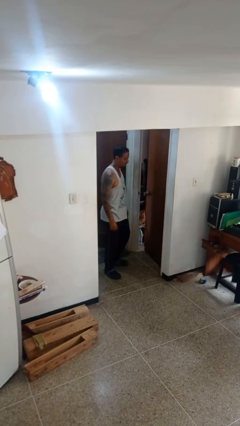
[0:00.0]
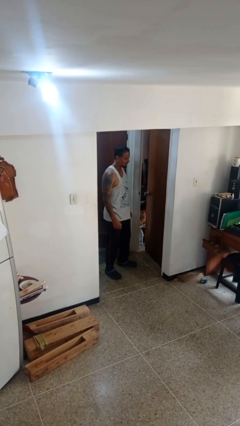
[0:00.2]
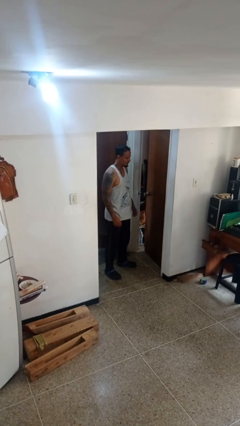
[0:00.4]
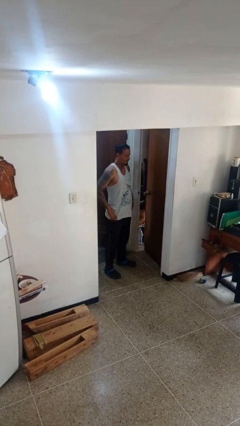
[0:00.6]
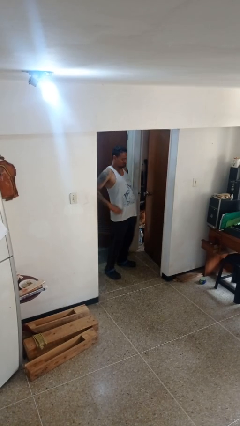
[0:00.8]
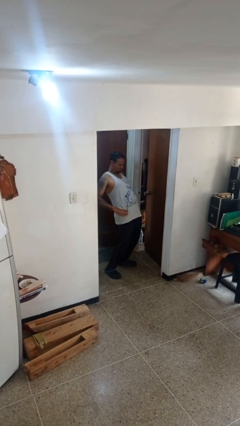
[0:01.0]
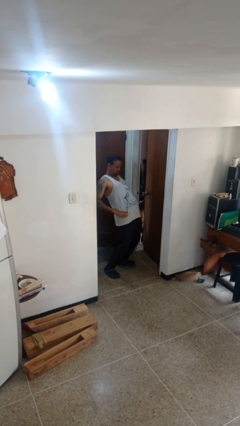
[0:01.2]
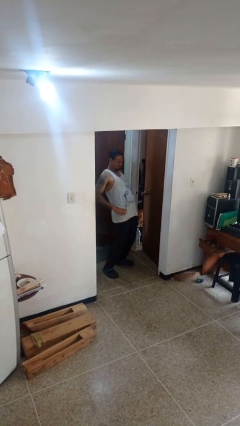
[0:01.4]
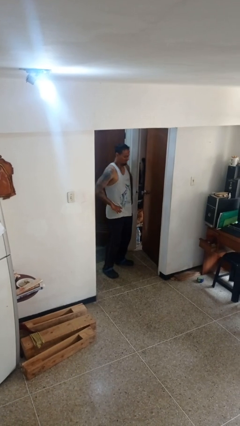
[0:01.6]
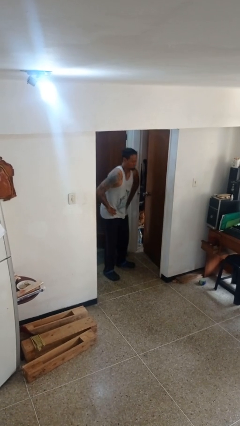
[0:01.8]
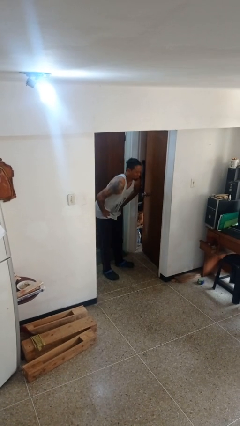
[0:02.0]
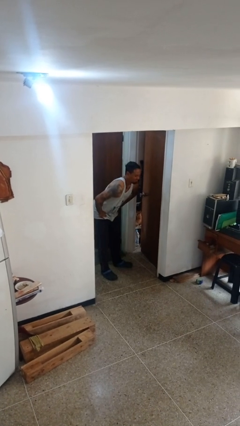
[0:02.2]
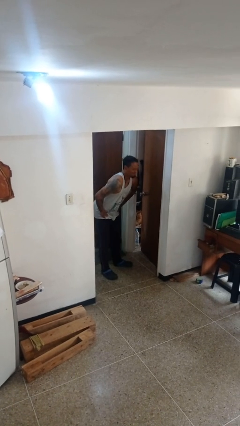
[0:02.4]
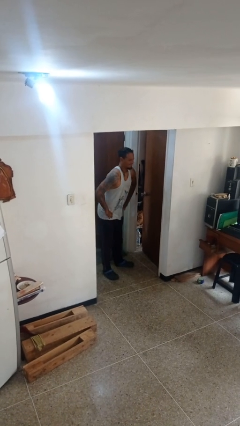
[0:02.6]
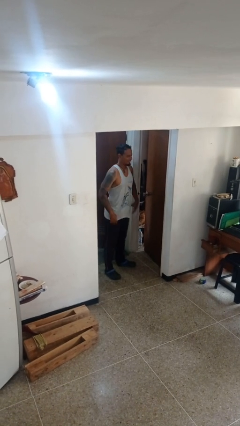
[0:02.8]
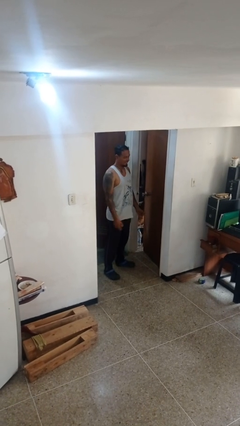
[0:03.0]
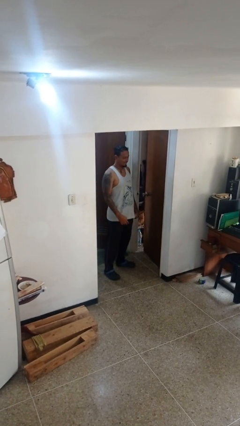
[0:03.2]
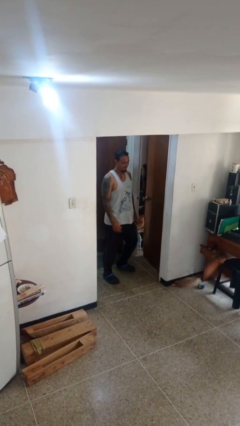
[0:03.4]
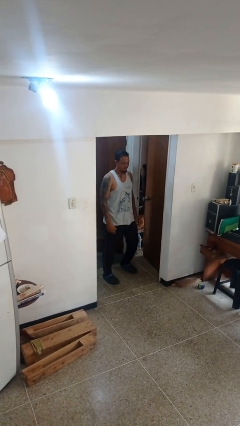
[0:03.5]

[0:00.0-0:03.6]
person wiggles hips

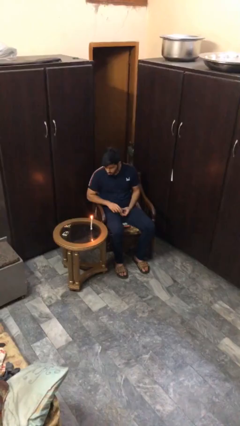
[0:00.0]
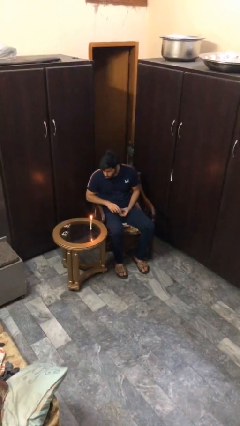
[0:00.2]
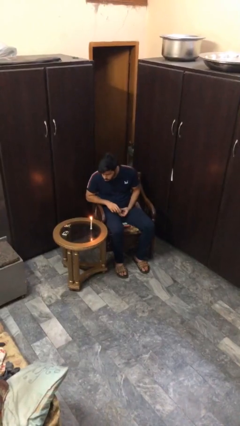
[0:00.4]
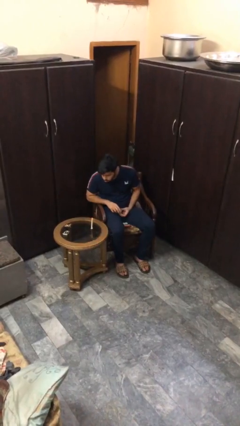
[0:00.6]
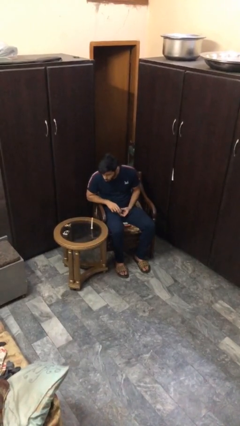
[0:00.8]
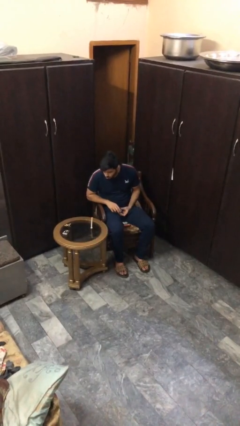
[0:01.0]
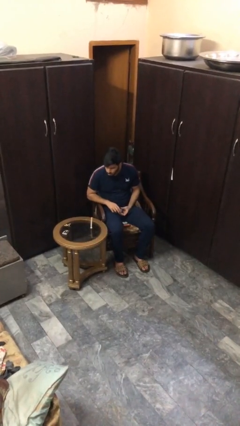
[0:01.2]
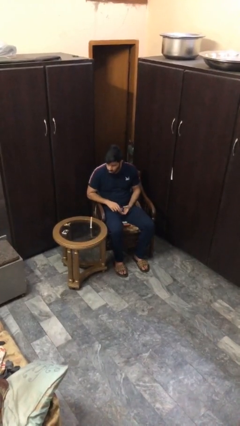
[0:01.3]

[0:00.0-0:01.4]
person extinguishes candle

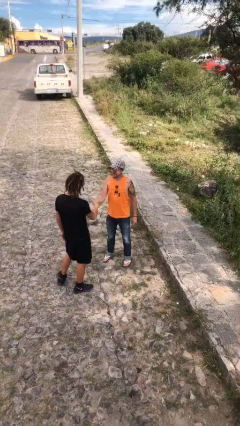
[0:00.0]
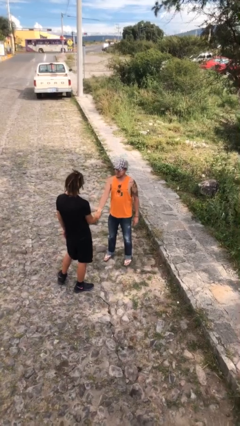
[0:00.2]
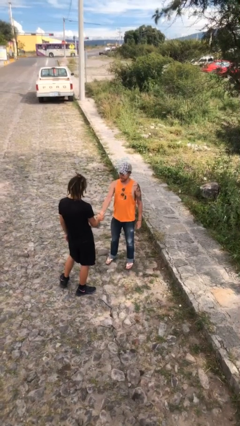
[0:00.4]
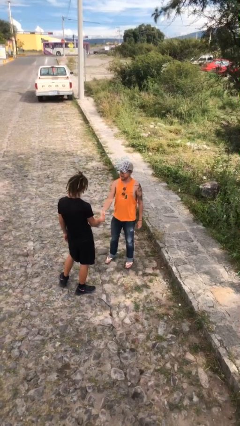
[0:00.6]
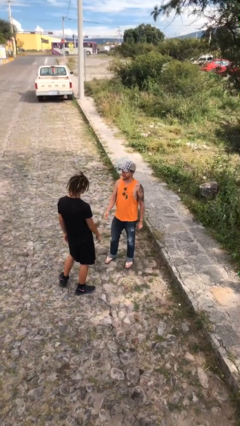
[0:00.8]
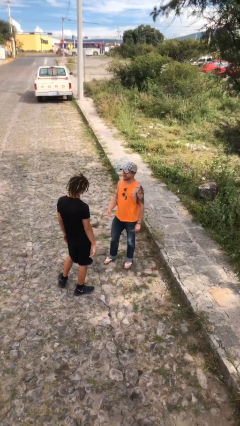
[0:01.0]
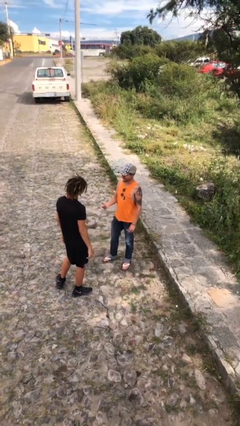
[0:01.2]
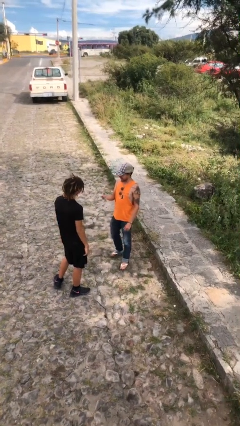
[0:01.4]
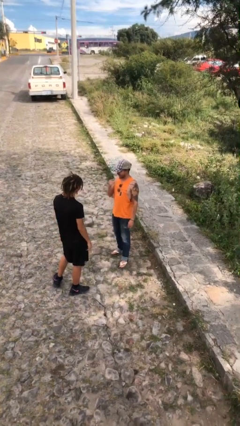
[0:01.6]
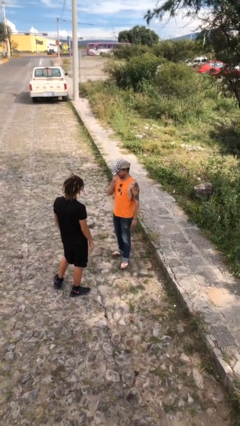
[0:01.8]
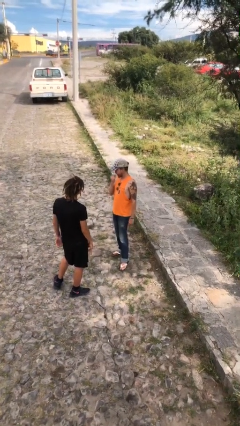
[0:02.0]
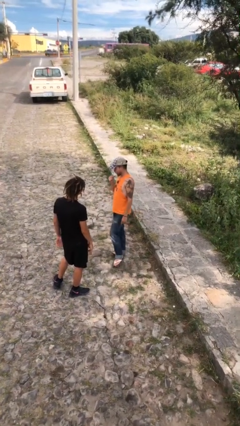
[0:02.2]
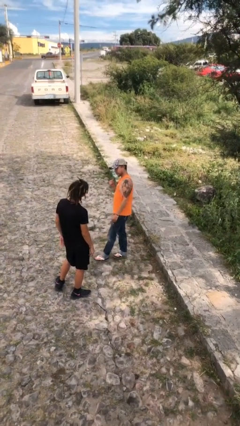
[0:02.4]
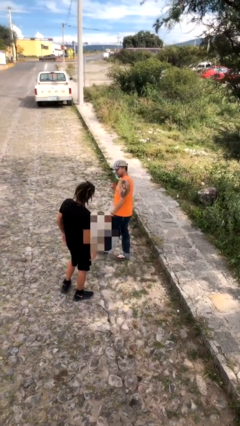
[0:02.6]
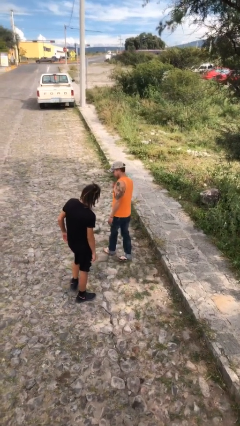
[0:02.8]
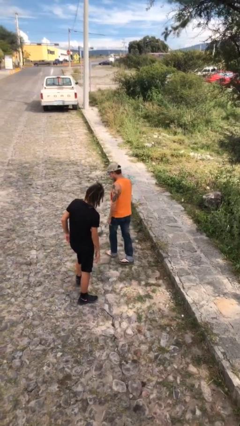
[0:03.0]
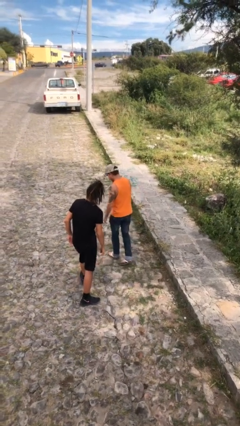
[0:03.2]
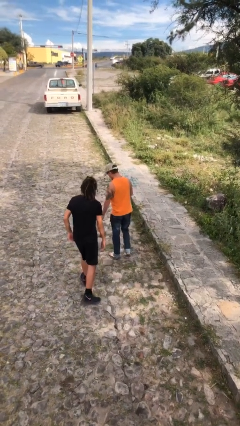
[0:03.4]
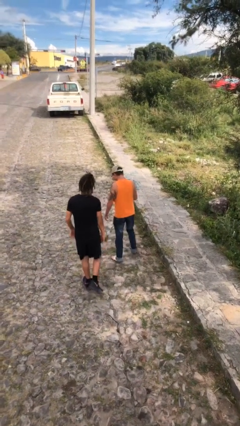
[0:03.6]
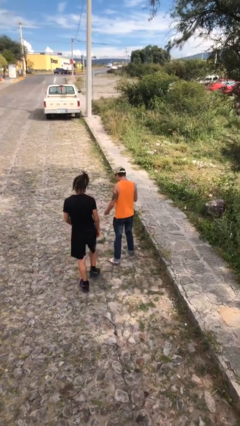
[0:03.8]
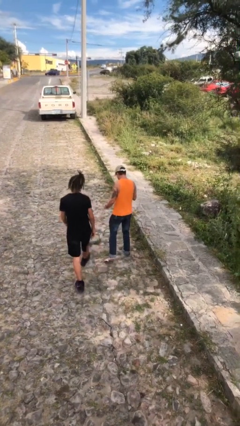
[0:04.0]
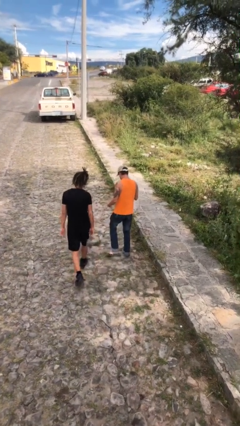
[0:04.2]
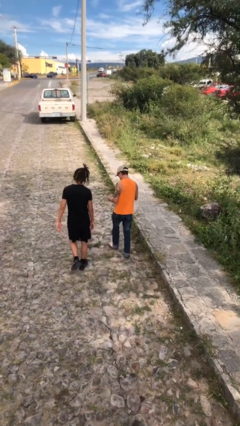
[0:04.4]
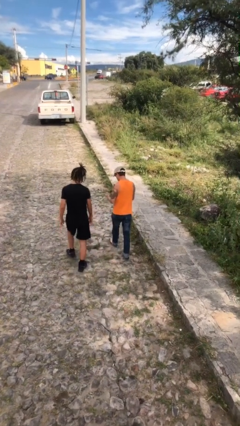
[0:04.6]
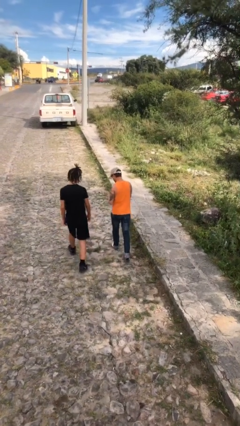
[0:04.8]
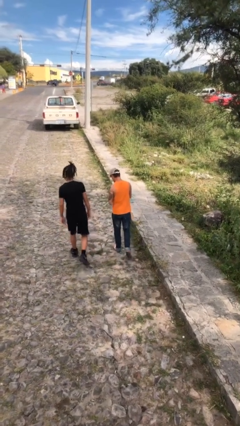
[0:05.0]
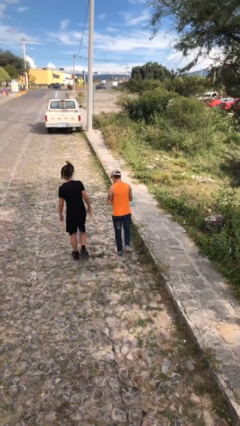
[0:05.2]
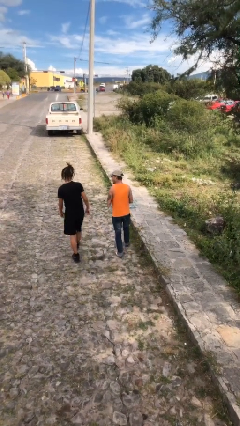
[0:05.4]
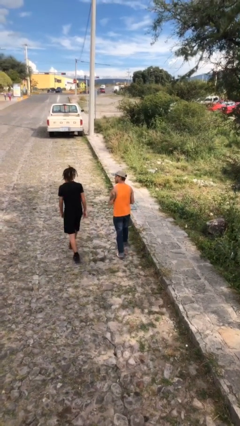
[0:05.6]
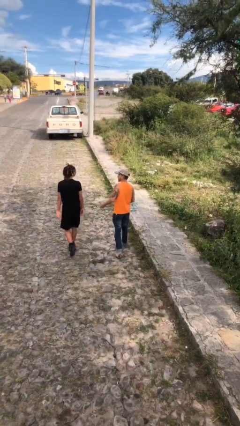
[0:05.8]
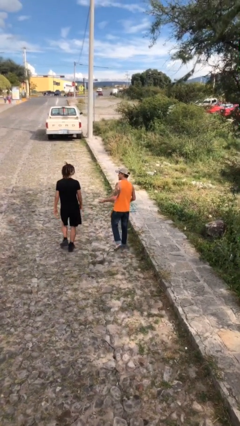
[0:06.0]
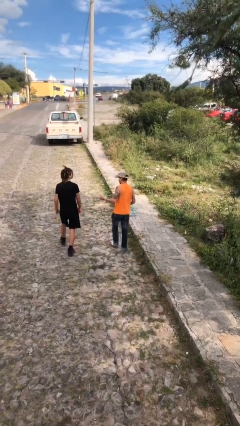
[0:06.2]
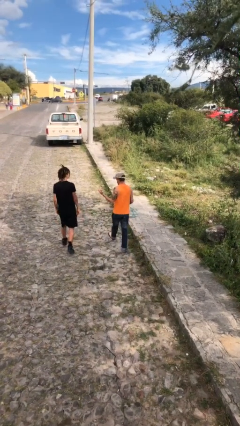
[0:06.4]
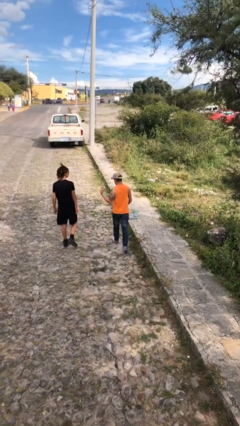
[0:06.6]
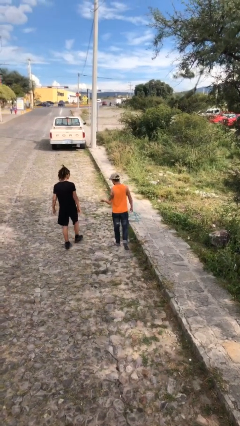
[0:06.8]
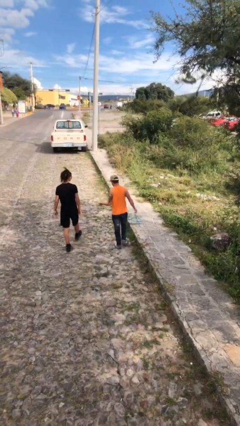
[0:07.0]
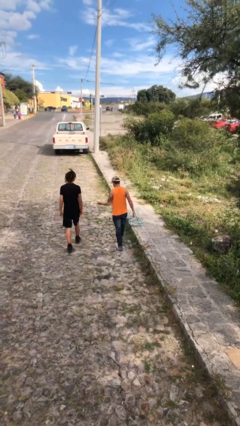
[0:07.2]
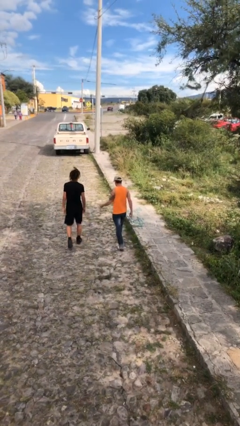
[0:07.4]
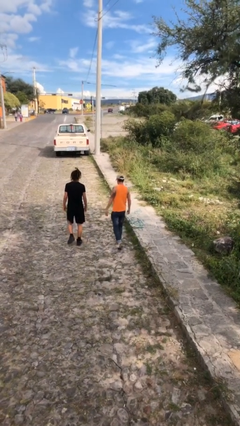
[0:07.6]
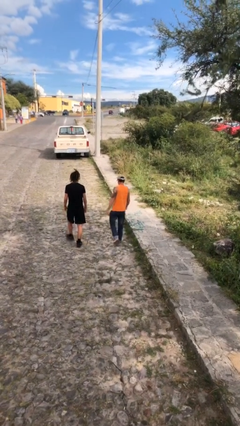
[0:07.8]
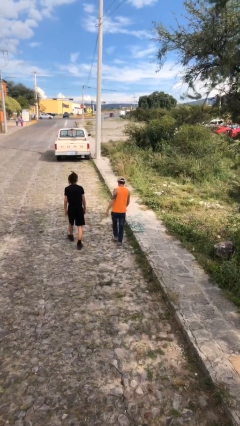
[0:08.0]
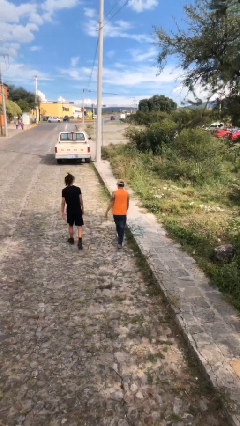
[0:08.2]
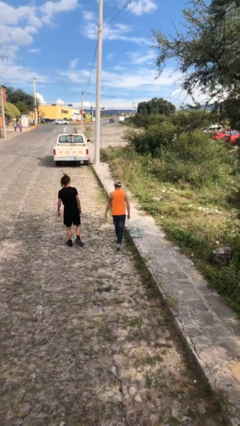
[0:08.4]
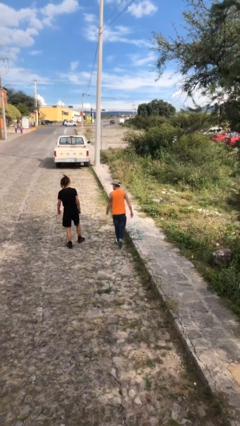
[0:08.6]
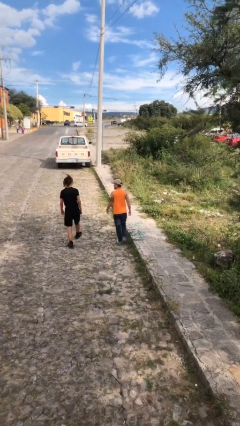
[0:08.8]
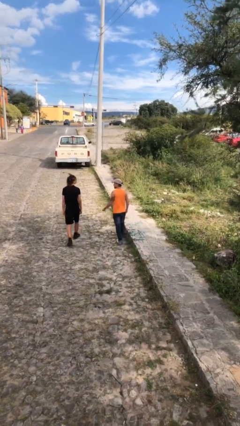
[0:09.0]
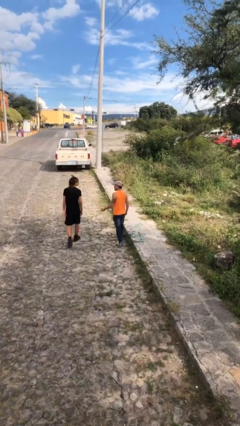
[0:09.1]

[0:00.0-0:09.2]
person talks to person

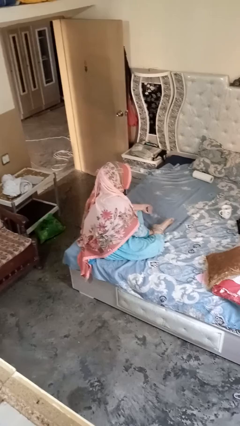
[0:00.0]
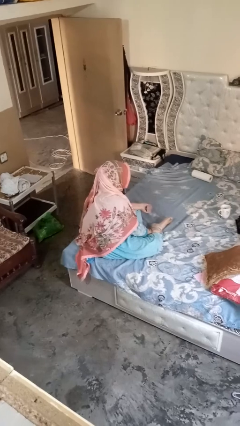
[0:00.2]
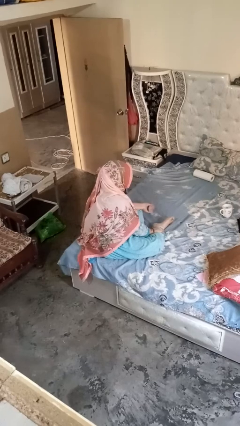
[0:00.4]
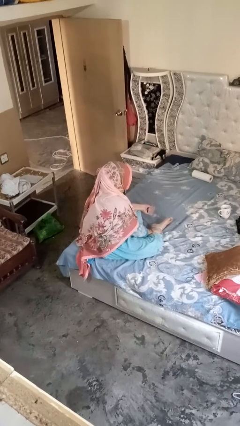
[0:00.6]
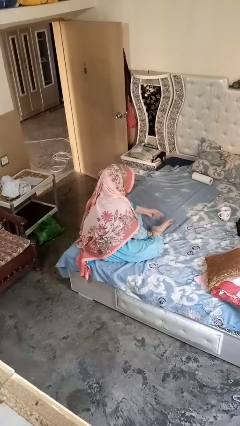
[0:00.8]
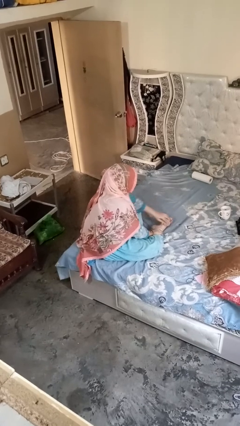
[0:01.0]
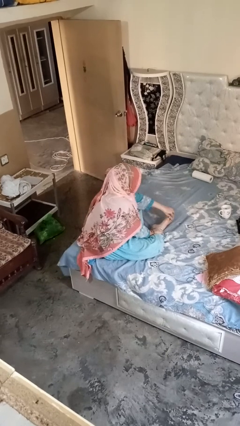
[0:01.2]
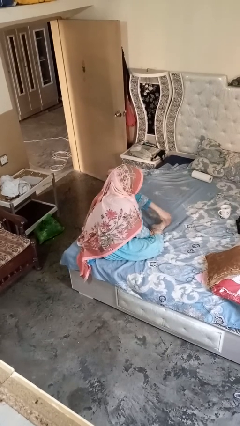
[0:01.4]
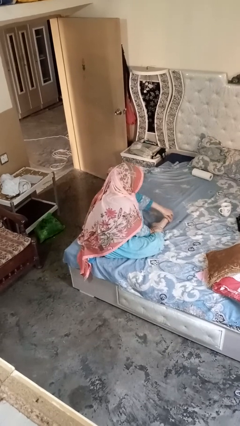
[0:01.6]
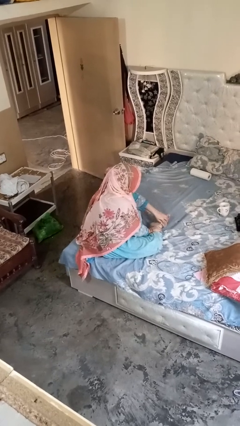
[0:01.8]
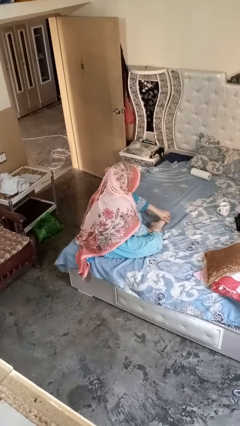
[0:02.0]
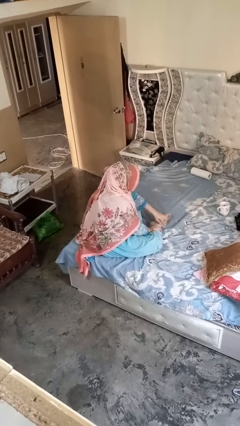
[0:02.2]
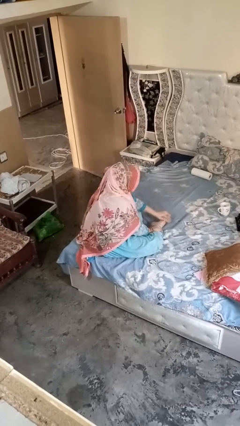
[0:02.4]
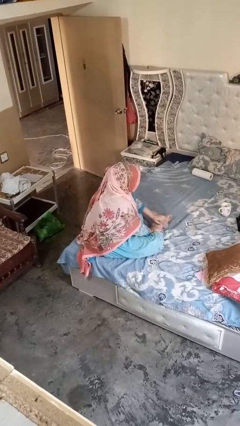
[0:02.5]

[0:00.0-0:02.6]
person rubs foot

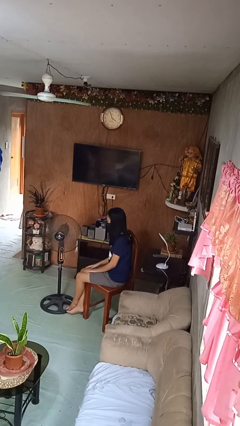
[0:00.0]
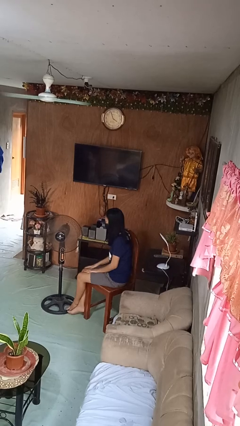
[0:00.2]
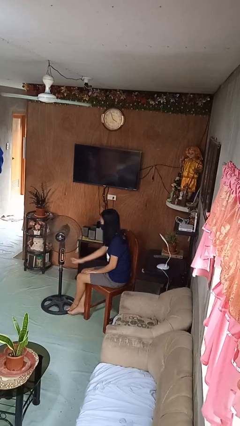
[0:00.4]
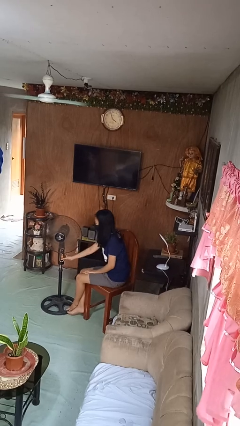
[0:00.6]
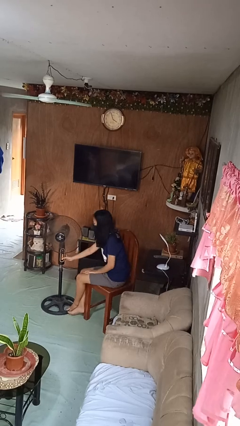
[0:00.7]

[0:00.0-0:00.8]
person turns on fan

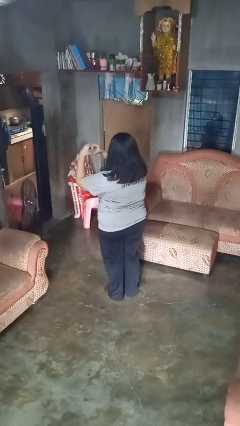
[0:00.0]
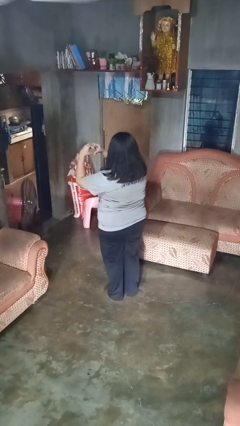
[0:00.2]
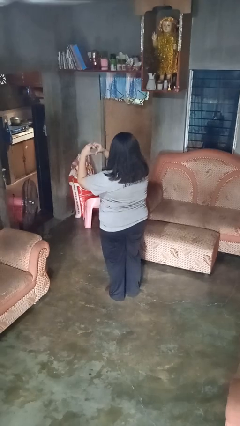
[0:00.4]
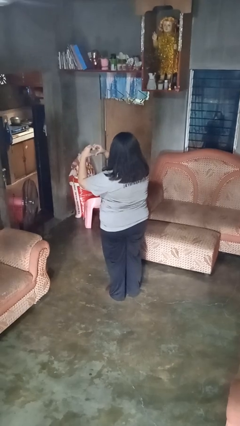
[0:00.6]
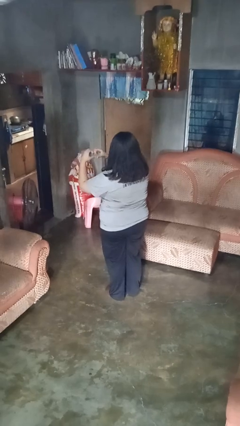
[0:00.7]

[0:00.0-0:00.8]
person gestures heart
